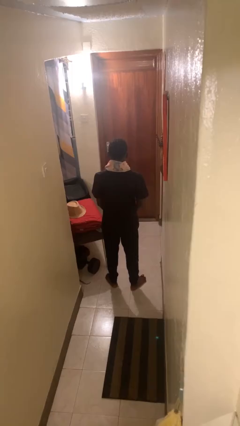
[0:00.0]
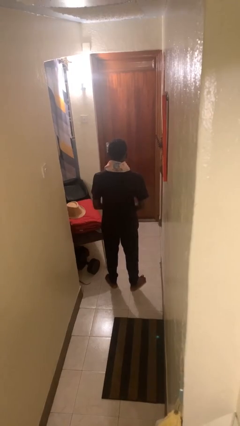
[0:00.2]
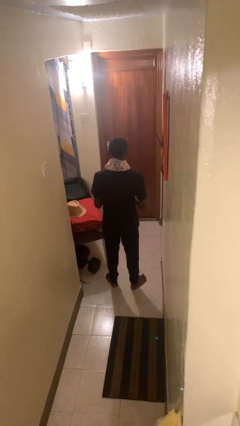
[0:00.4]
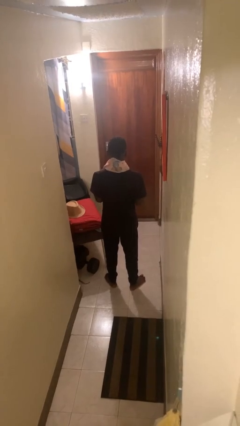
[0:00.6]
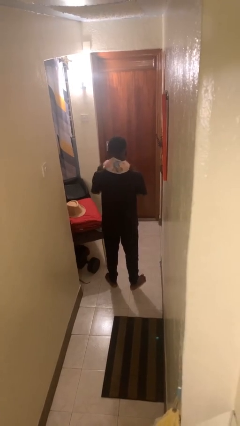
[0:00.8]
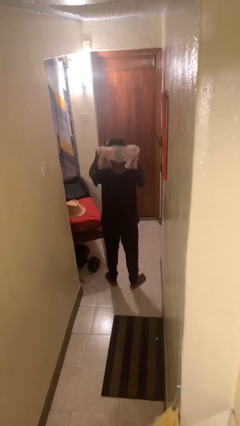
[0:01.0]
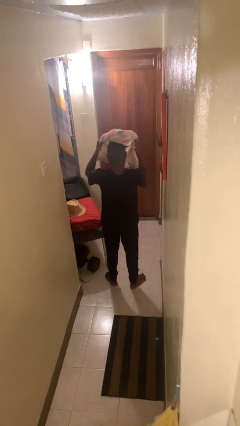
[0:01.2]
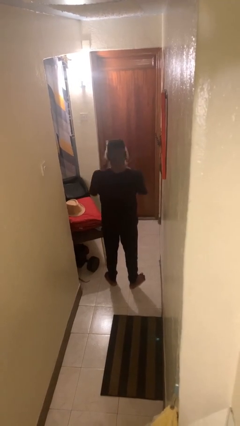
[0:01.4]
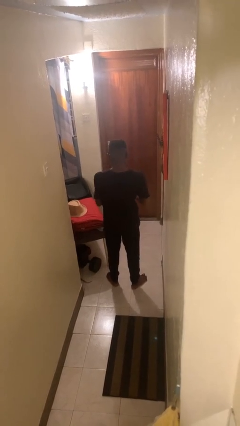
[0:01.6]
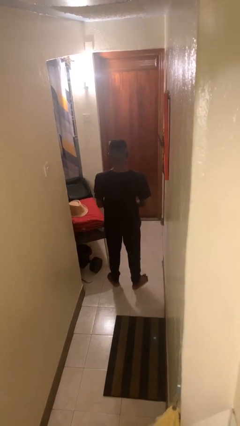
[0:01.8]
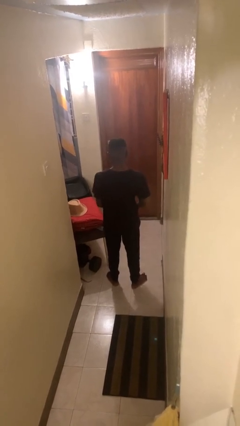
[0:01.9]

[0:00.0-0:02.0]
person takes off scarf

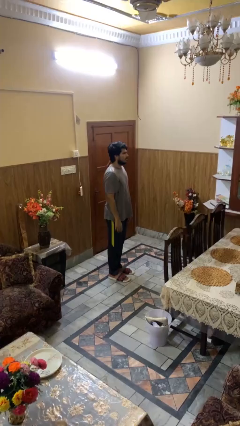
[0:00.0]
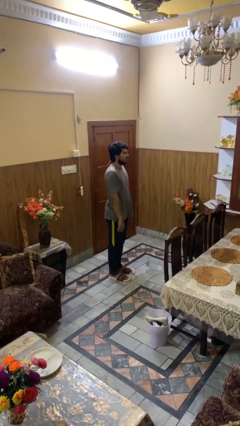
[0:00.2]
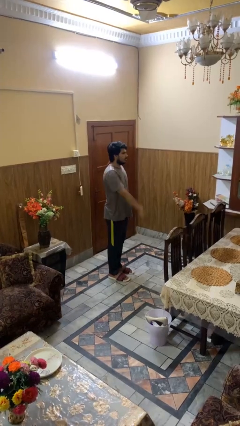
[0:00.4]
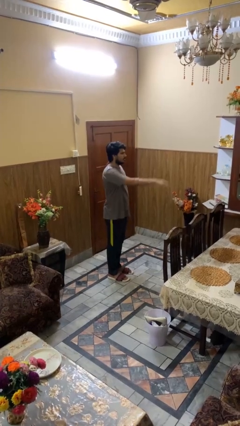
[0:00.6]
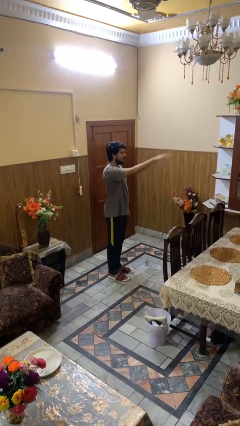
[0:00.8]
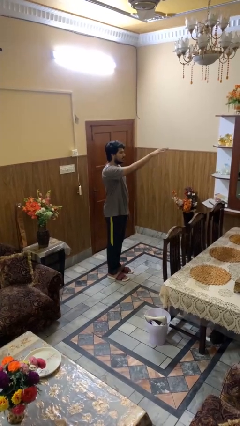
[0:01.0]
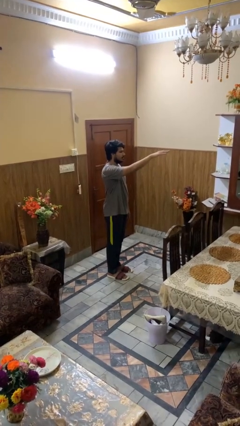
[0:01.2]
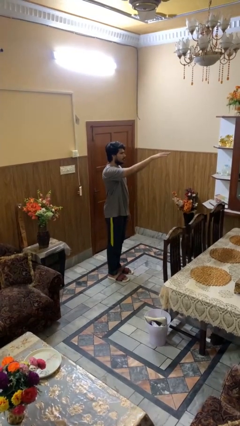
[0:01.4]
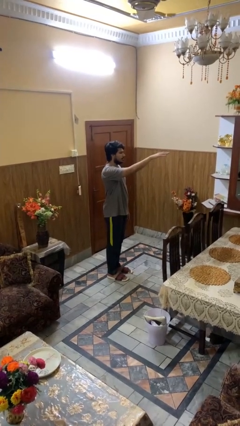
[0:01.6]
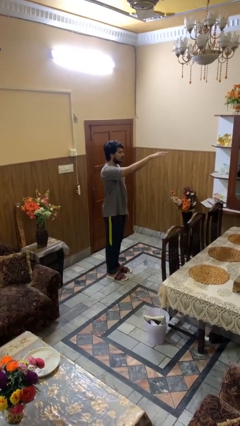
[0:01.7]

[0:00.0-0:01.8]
person gestures swipe up

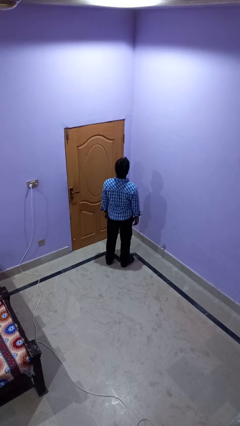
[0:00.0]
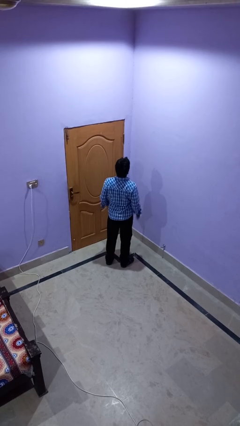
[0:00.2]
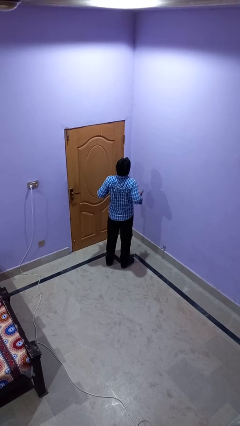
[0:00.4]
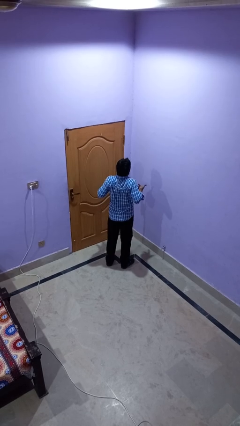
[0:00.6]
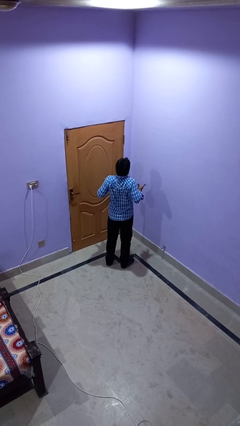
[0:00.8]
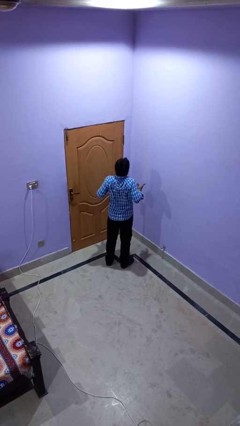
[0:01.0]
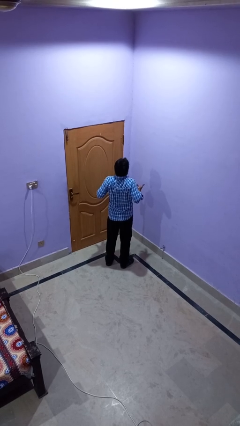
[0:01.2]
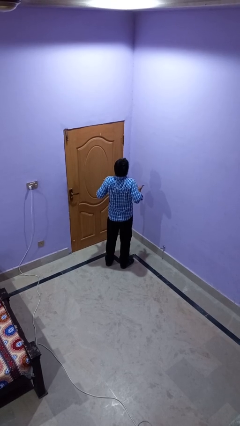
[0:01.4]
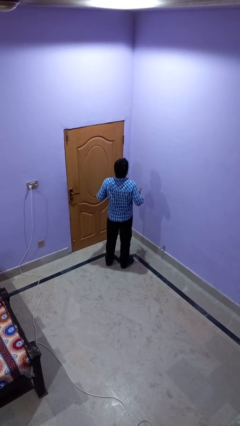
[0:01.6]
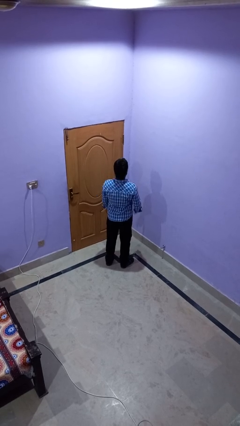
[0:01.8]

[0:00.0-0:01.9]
person shrugs

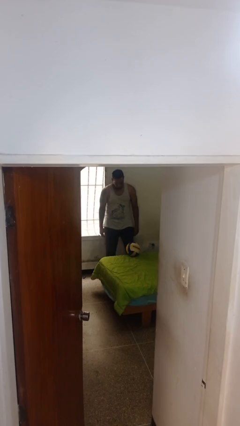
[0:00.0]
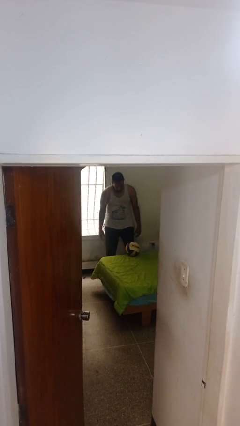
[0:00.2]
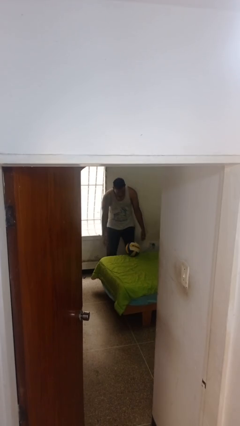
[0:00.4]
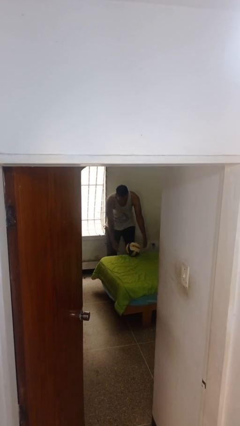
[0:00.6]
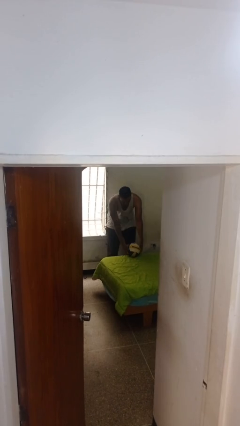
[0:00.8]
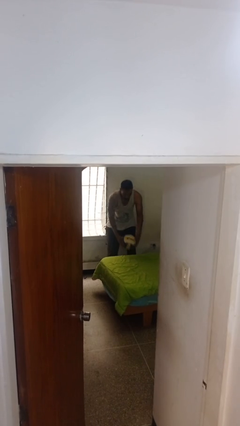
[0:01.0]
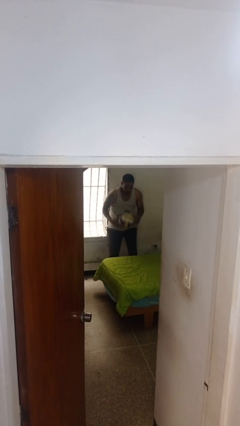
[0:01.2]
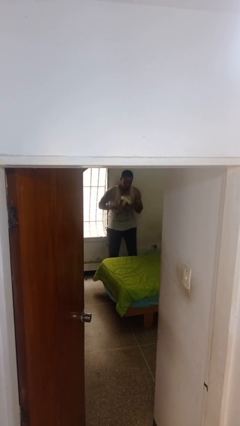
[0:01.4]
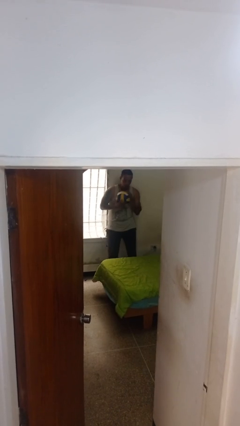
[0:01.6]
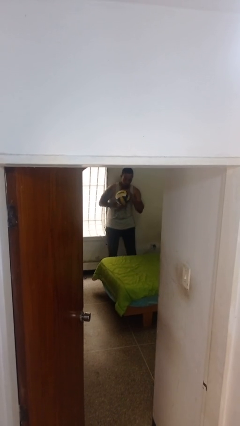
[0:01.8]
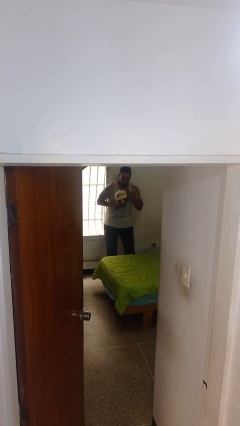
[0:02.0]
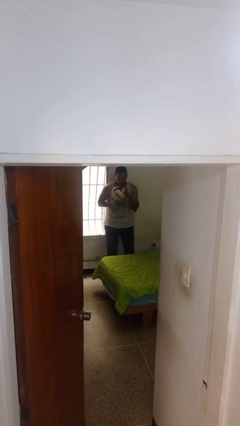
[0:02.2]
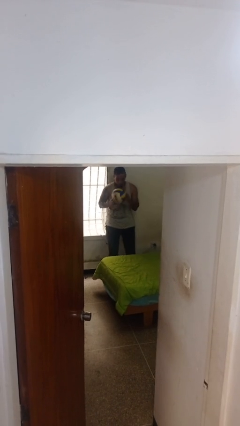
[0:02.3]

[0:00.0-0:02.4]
person picks up object from bed

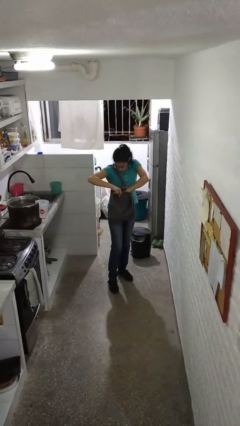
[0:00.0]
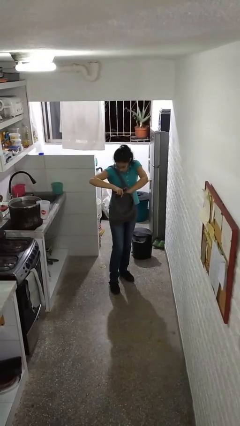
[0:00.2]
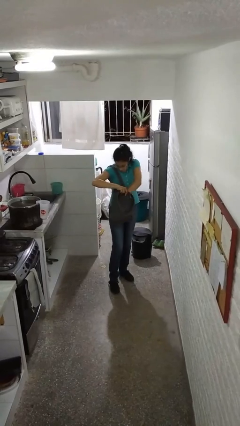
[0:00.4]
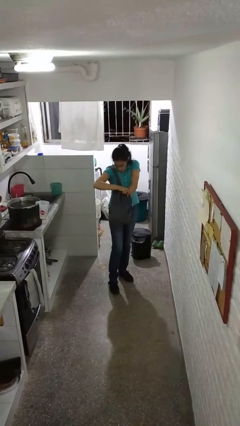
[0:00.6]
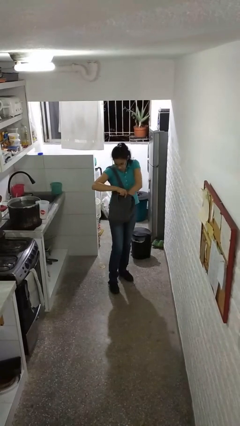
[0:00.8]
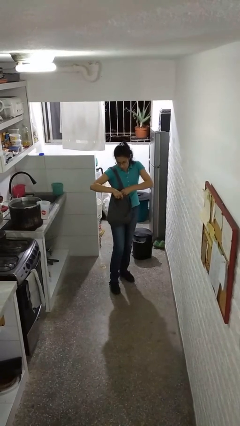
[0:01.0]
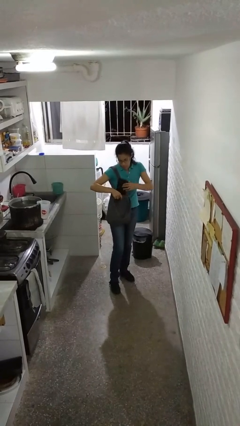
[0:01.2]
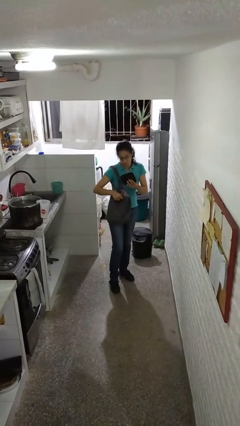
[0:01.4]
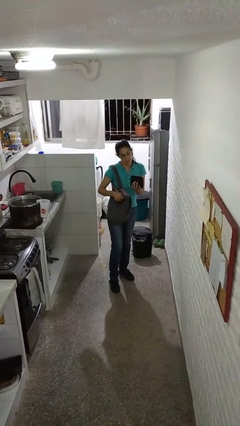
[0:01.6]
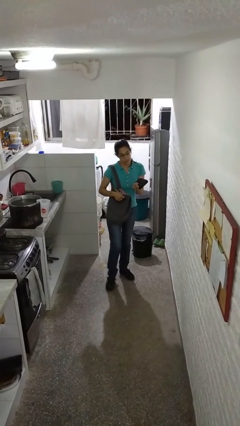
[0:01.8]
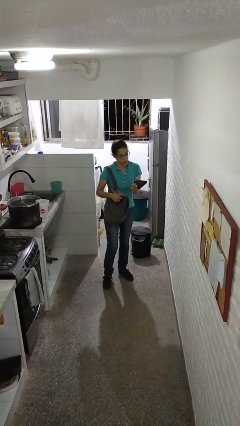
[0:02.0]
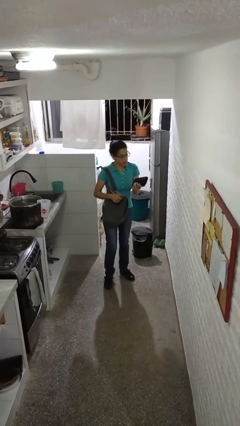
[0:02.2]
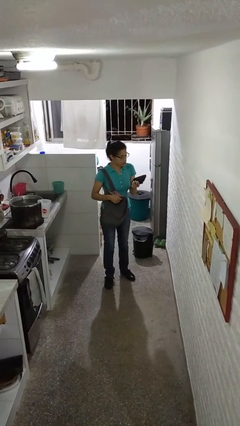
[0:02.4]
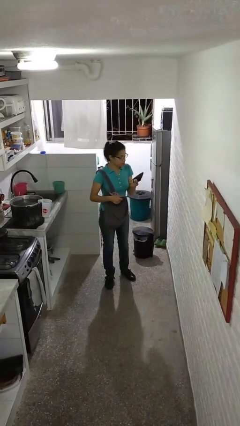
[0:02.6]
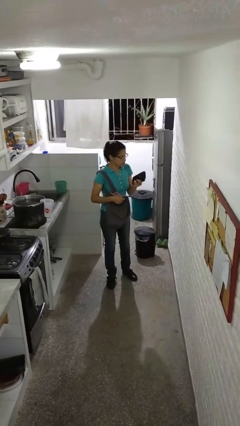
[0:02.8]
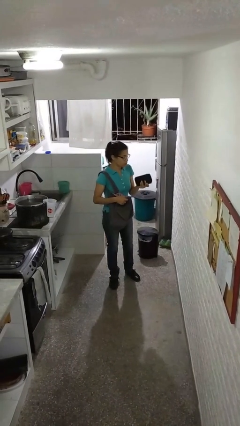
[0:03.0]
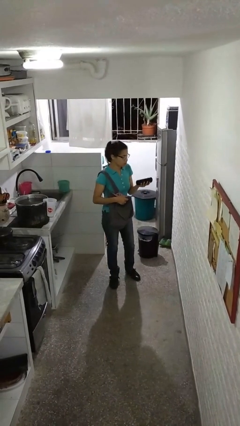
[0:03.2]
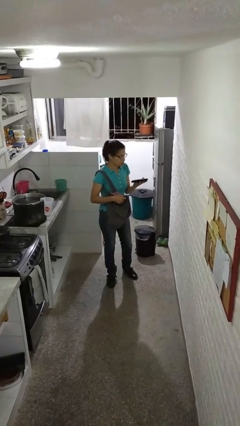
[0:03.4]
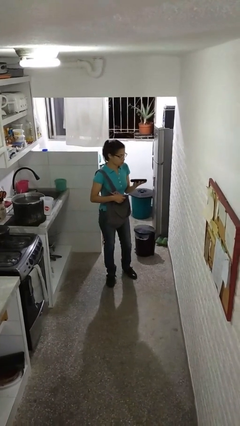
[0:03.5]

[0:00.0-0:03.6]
person takes object from purse

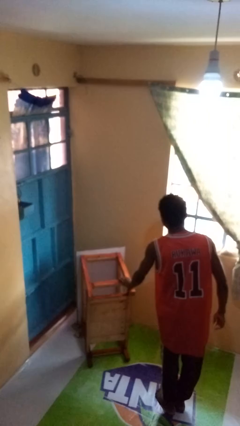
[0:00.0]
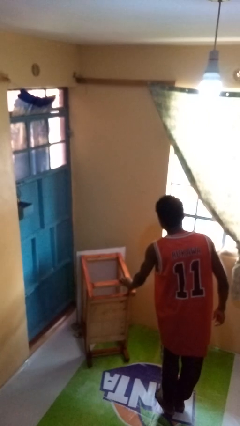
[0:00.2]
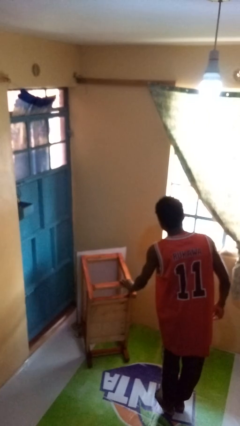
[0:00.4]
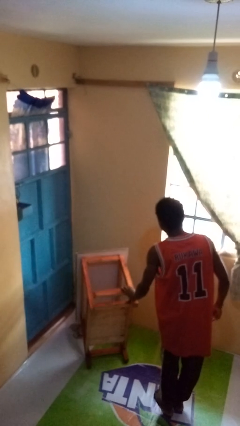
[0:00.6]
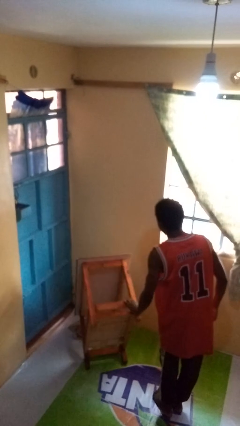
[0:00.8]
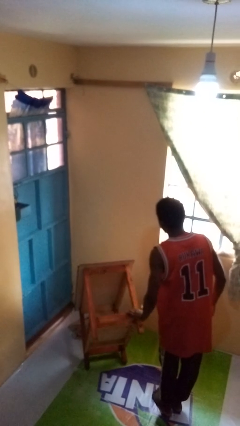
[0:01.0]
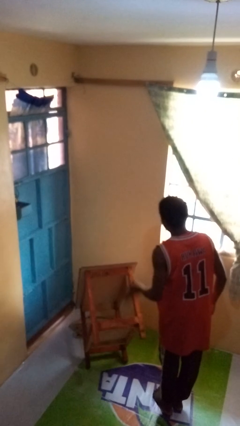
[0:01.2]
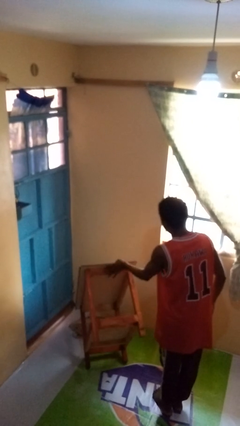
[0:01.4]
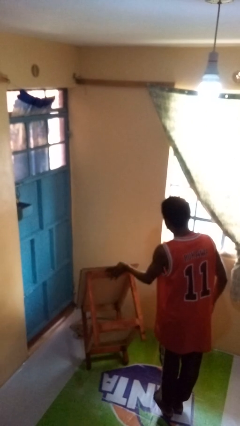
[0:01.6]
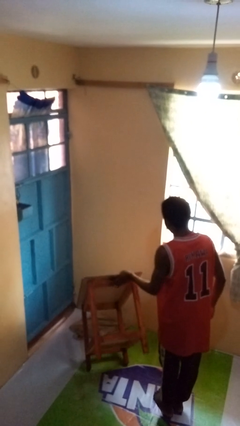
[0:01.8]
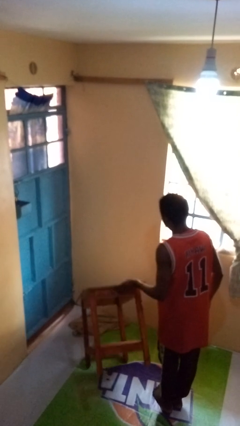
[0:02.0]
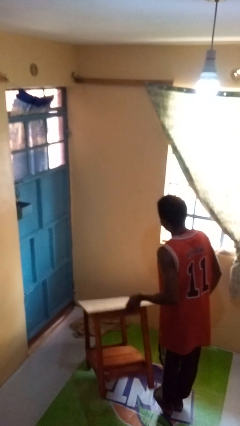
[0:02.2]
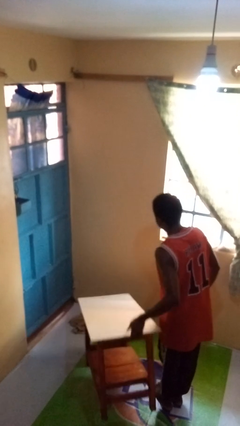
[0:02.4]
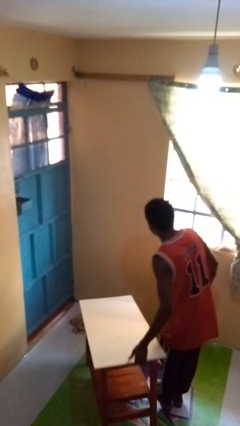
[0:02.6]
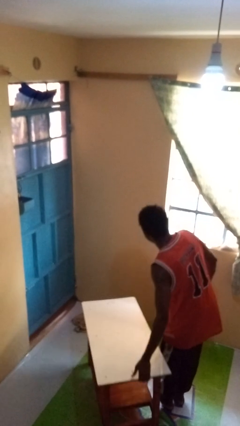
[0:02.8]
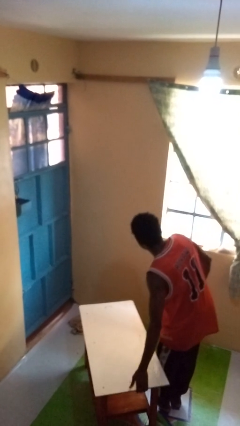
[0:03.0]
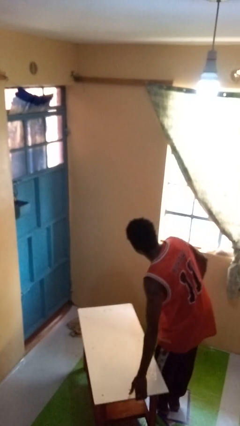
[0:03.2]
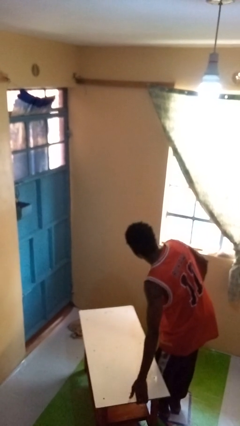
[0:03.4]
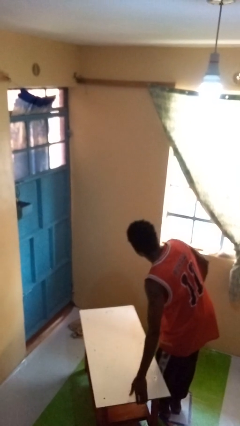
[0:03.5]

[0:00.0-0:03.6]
person sets upright furniture

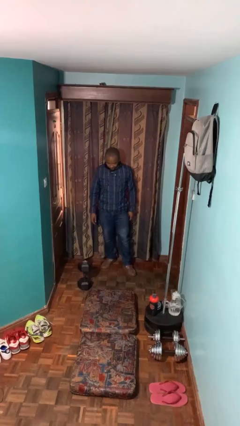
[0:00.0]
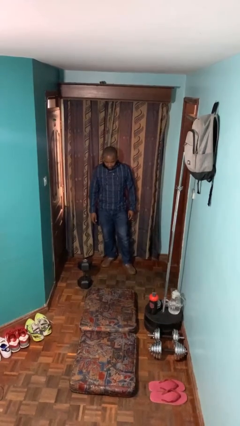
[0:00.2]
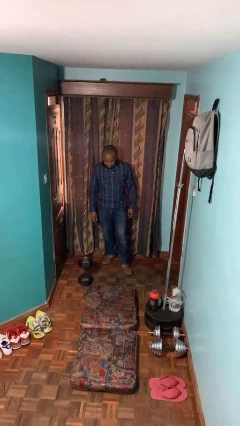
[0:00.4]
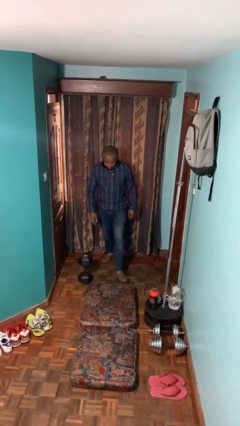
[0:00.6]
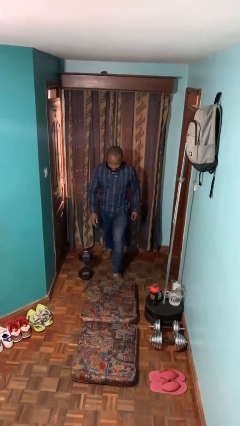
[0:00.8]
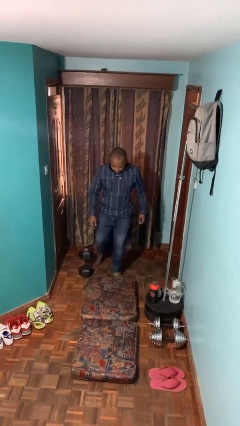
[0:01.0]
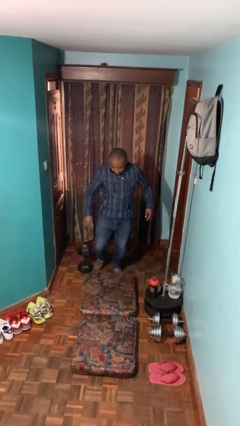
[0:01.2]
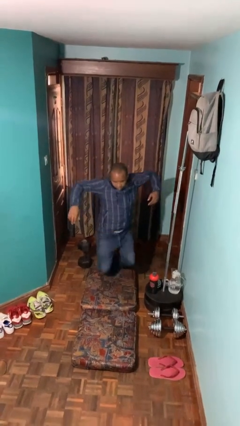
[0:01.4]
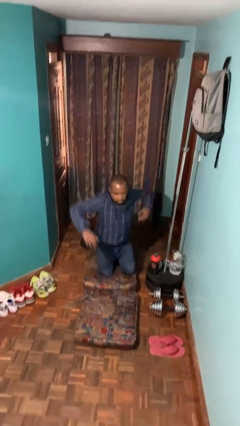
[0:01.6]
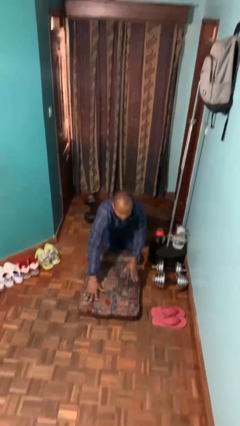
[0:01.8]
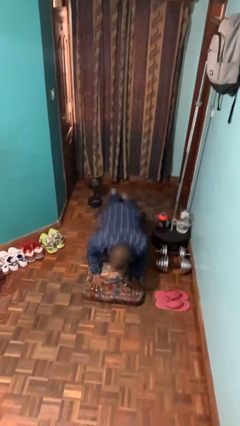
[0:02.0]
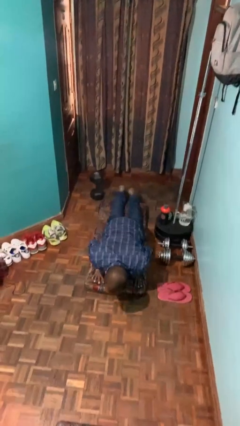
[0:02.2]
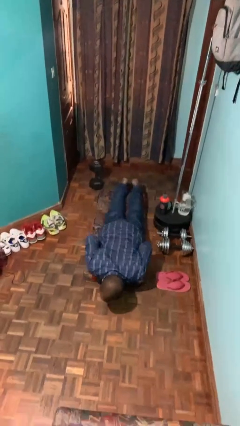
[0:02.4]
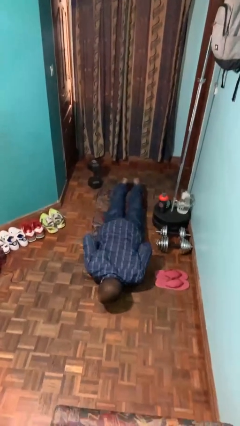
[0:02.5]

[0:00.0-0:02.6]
person trips on object on floor
